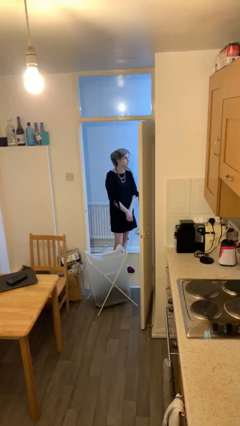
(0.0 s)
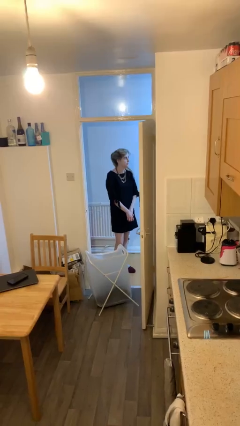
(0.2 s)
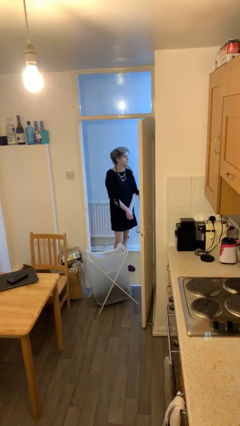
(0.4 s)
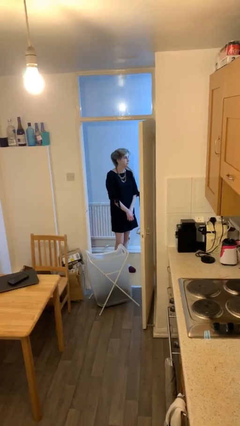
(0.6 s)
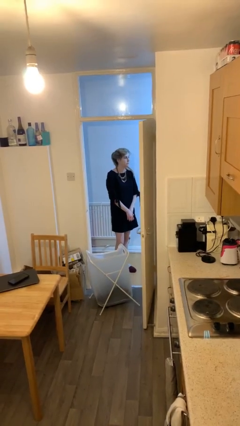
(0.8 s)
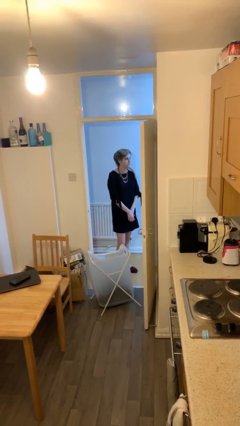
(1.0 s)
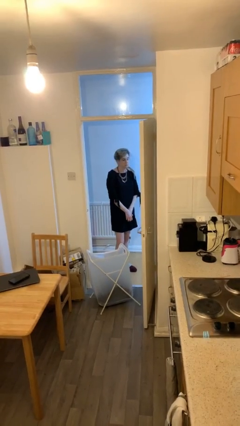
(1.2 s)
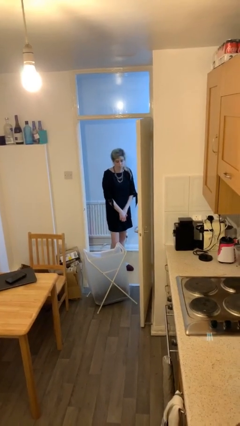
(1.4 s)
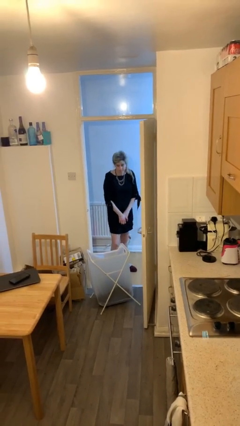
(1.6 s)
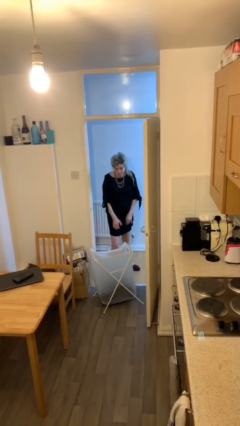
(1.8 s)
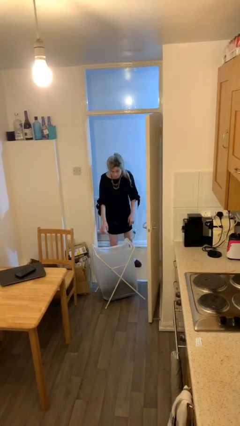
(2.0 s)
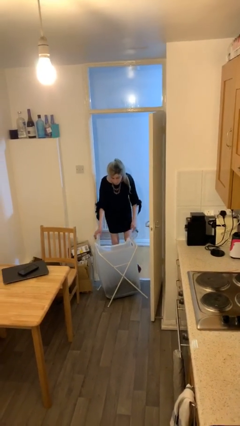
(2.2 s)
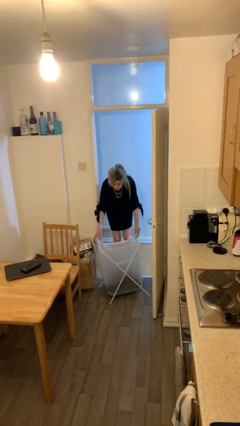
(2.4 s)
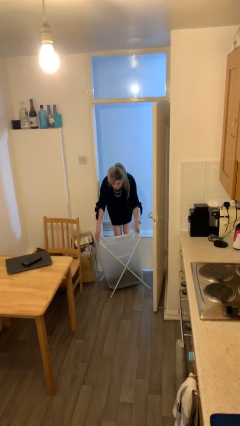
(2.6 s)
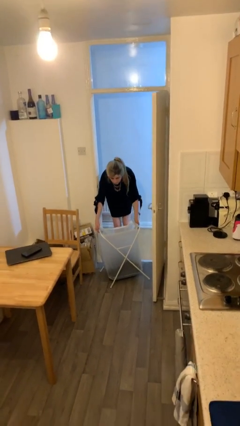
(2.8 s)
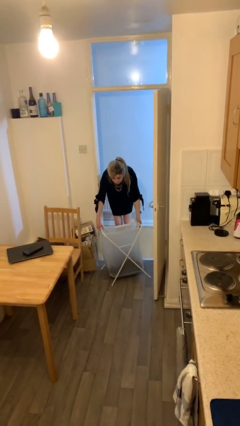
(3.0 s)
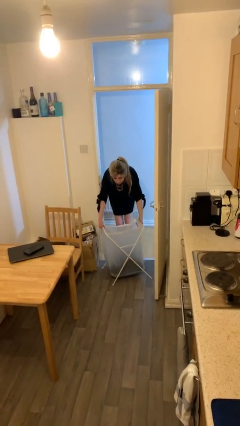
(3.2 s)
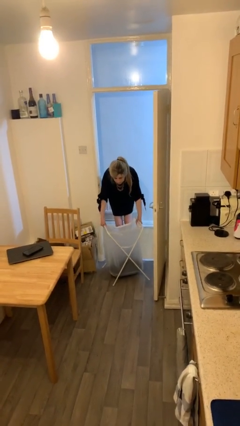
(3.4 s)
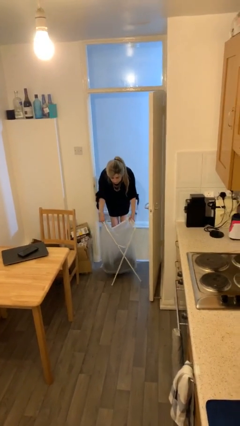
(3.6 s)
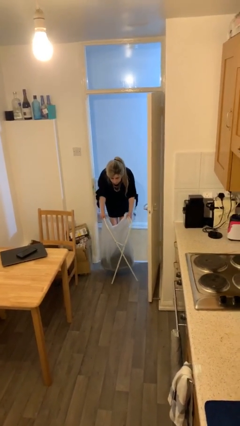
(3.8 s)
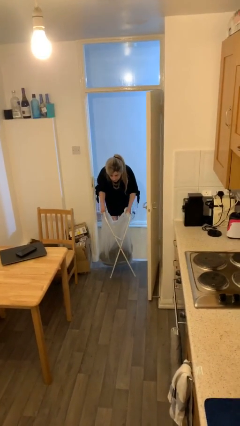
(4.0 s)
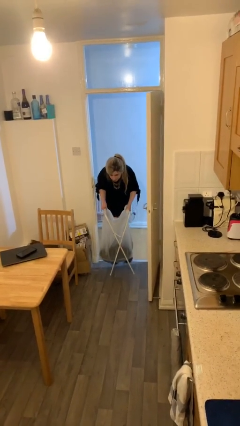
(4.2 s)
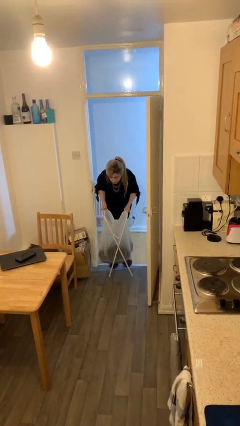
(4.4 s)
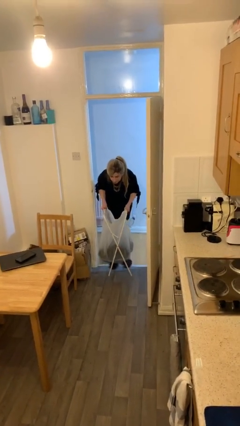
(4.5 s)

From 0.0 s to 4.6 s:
person picks up object from floor

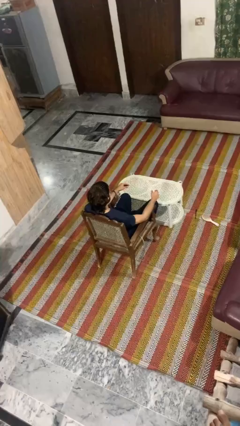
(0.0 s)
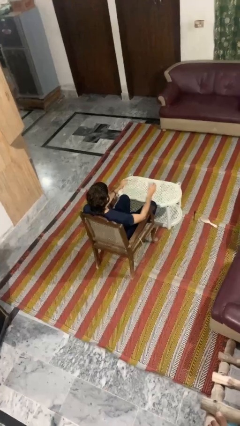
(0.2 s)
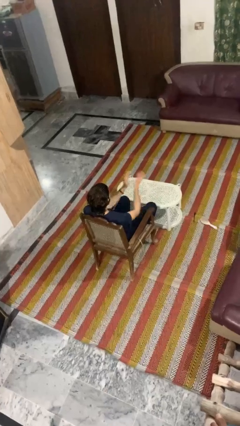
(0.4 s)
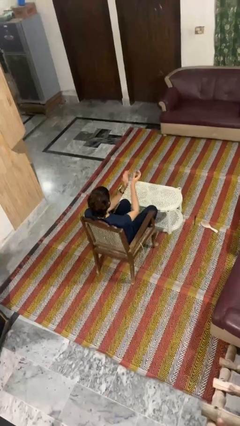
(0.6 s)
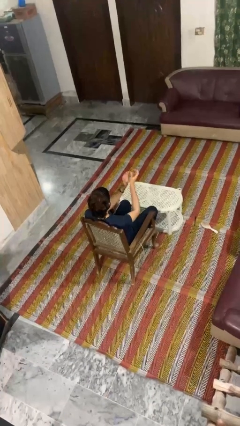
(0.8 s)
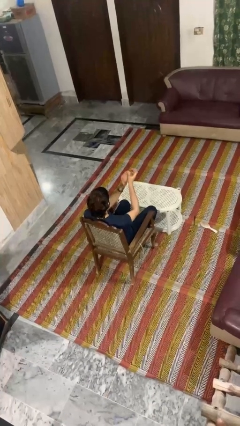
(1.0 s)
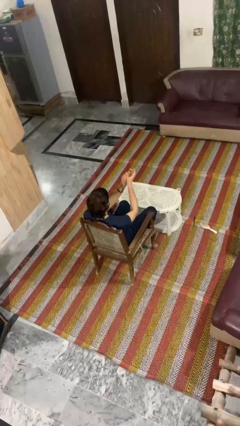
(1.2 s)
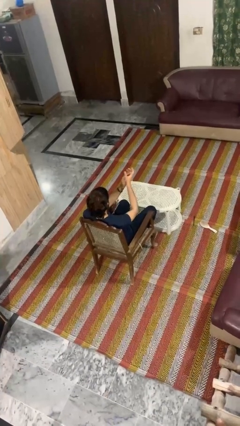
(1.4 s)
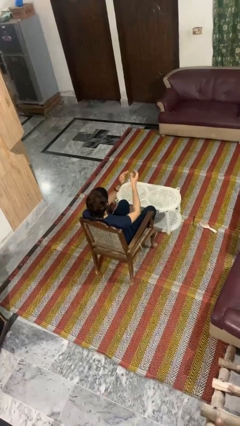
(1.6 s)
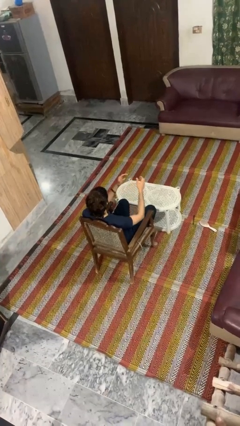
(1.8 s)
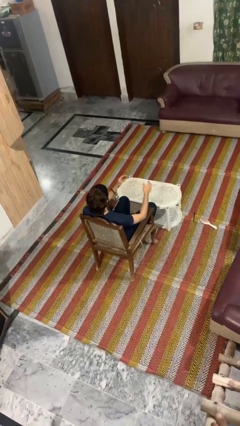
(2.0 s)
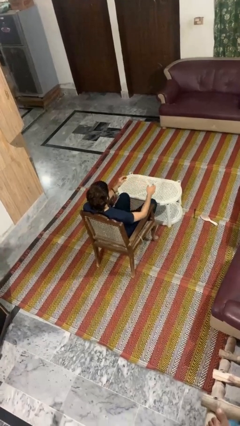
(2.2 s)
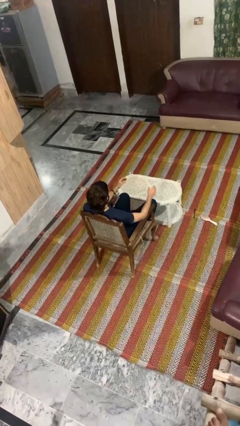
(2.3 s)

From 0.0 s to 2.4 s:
person claps hands

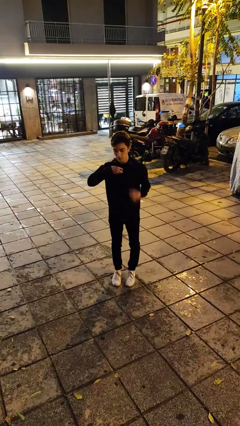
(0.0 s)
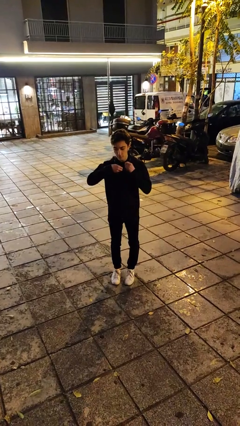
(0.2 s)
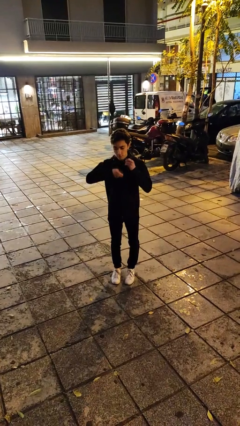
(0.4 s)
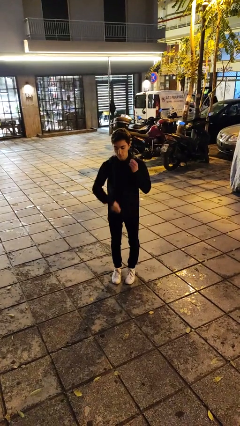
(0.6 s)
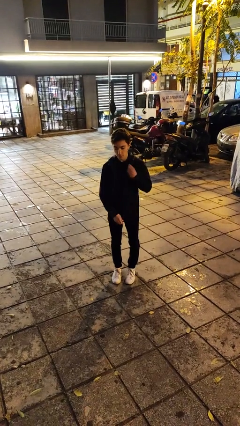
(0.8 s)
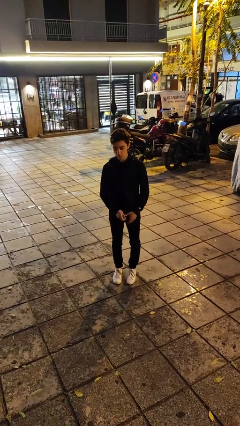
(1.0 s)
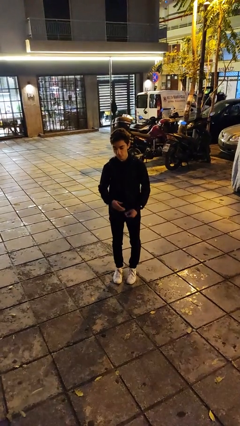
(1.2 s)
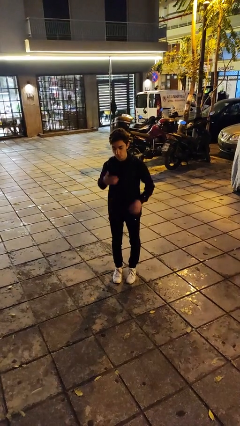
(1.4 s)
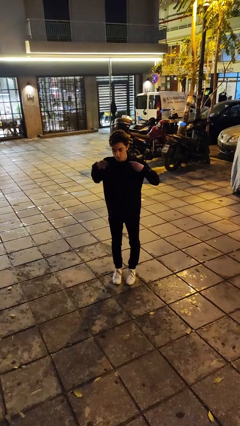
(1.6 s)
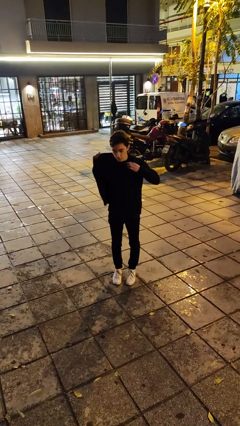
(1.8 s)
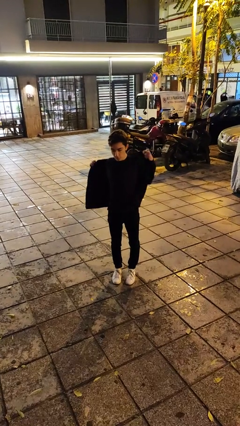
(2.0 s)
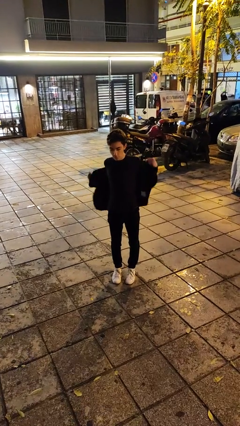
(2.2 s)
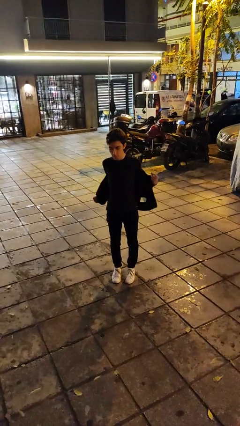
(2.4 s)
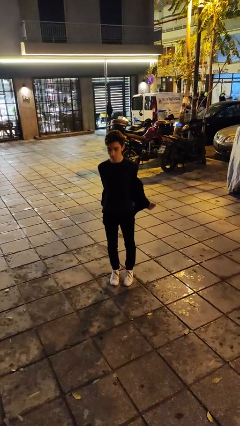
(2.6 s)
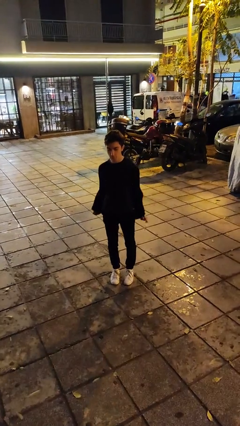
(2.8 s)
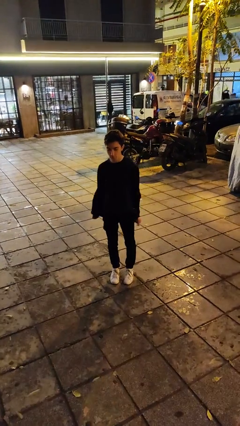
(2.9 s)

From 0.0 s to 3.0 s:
person unzips jacket

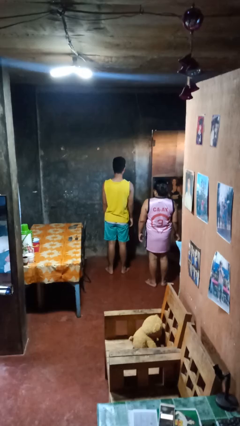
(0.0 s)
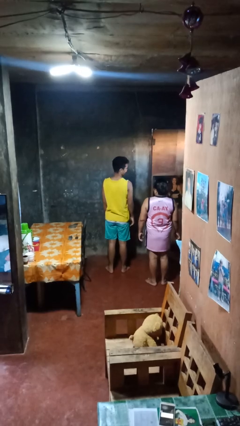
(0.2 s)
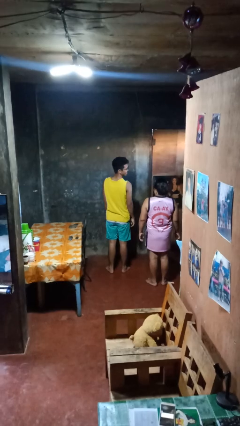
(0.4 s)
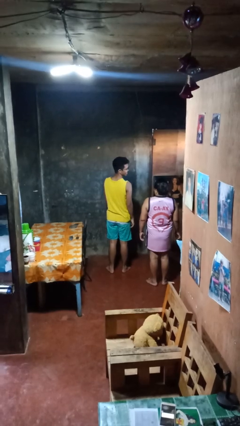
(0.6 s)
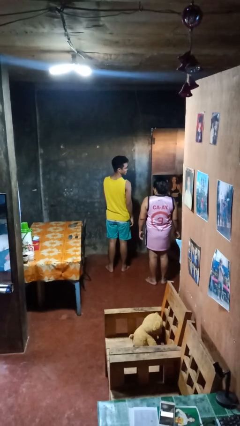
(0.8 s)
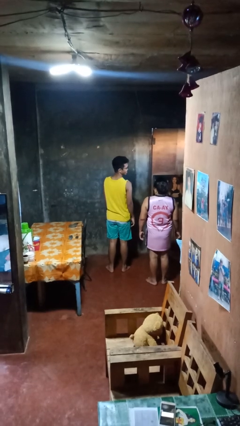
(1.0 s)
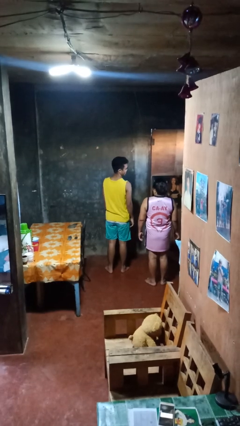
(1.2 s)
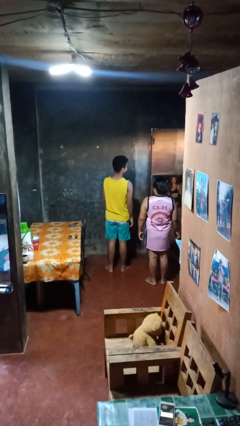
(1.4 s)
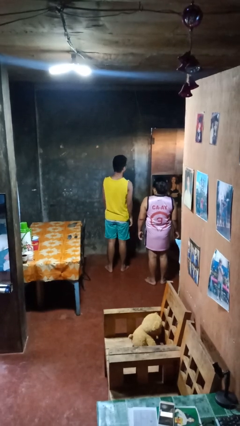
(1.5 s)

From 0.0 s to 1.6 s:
person looks over shoulder

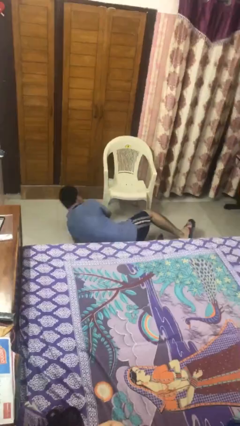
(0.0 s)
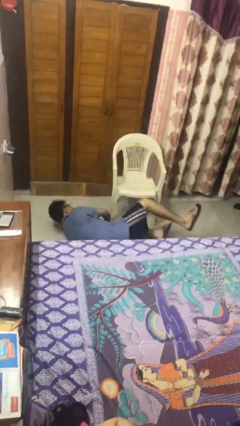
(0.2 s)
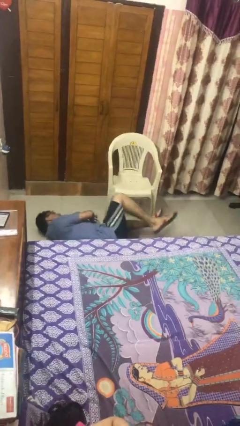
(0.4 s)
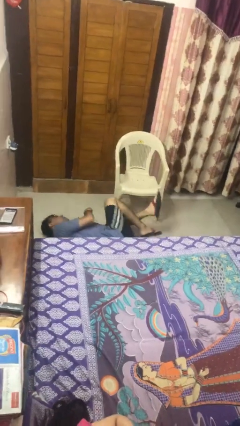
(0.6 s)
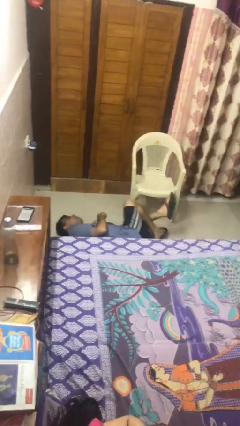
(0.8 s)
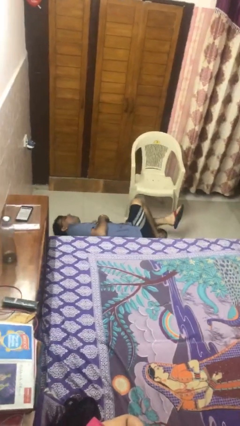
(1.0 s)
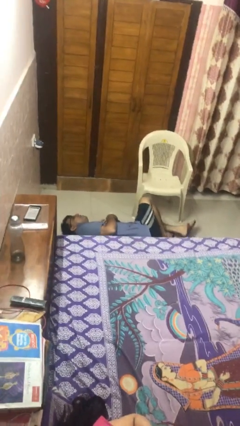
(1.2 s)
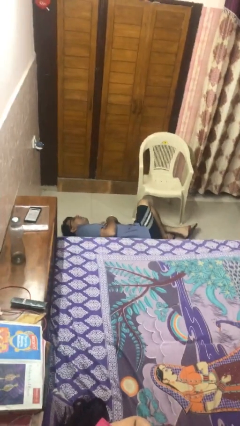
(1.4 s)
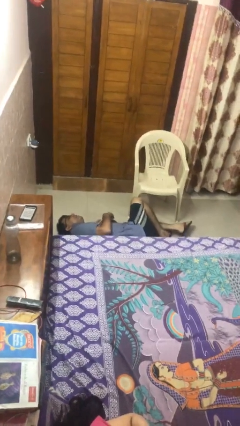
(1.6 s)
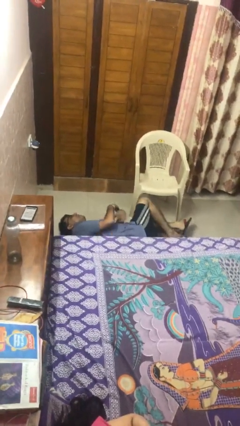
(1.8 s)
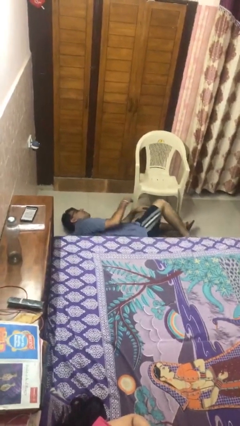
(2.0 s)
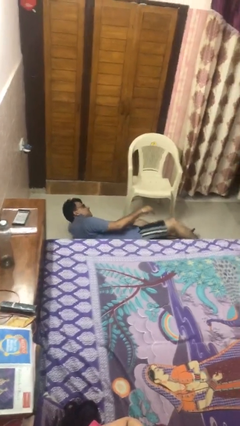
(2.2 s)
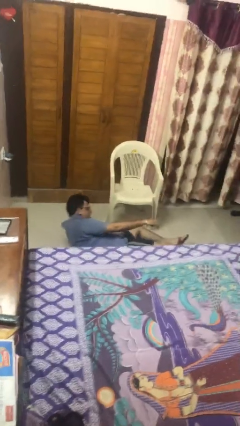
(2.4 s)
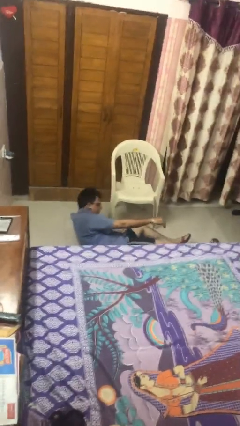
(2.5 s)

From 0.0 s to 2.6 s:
person lies down on floor

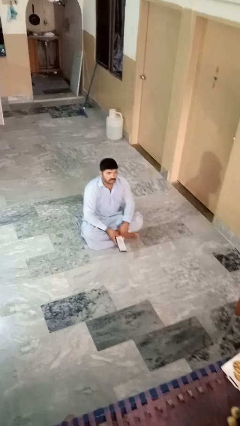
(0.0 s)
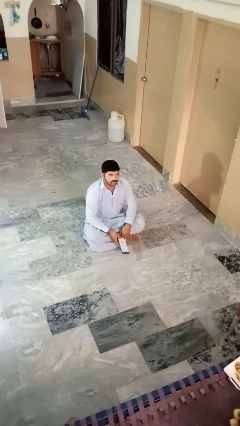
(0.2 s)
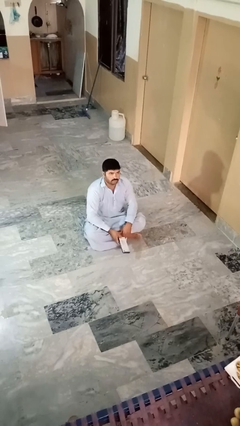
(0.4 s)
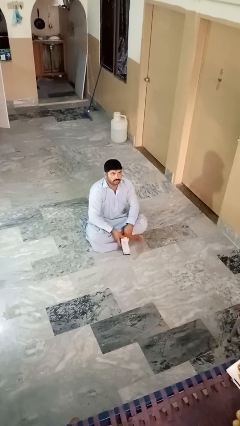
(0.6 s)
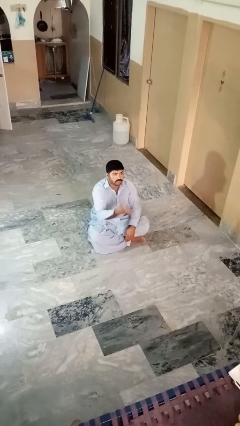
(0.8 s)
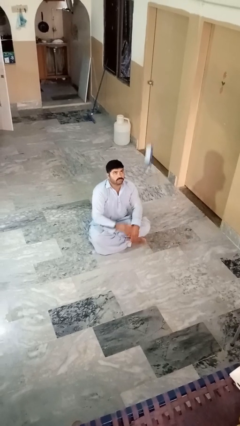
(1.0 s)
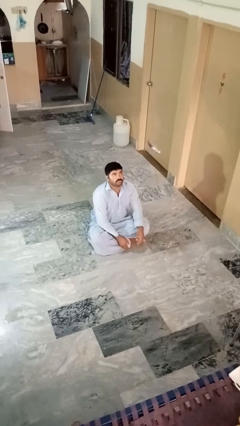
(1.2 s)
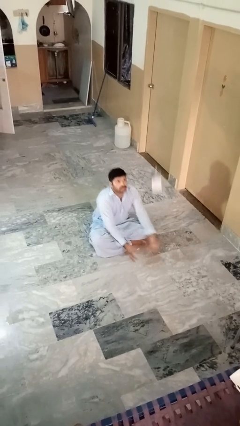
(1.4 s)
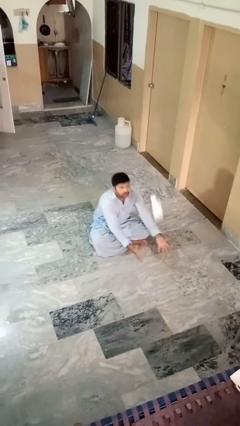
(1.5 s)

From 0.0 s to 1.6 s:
person drops object

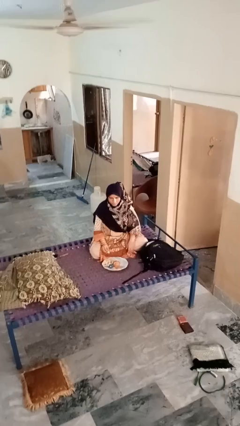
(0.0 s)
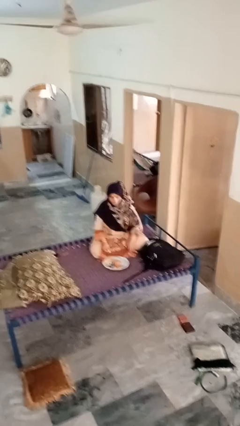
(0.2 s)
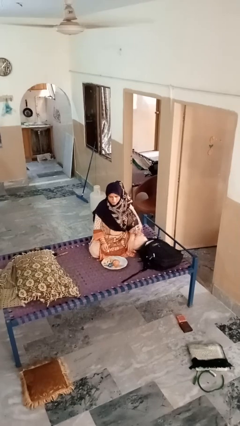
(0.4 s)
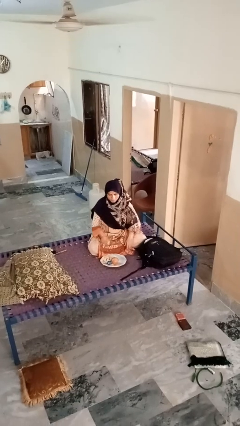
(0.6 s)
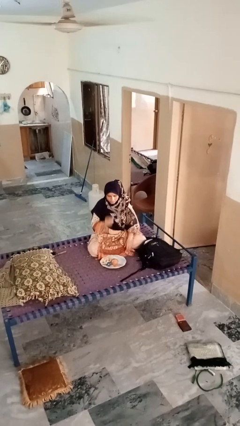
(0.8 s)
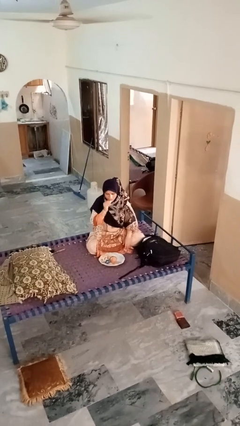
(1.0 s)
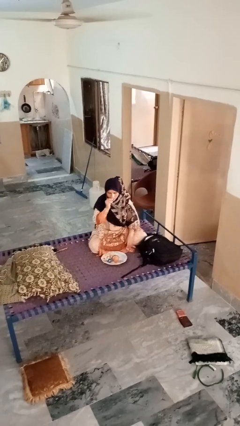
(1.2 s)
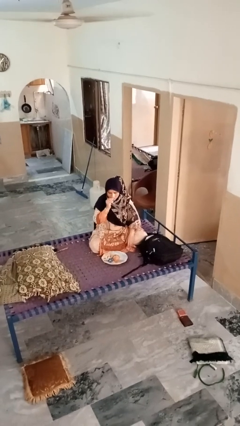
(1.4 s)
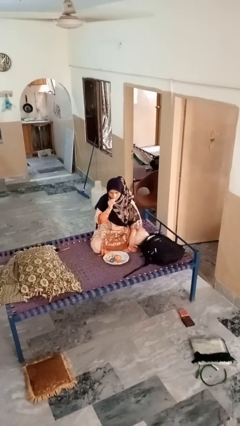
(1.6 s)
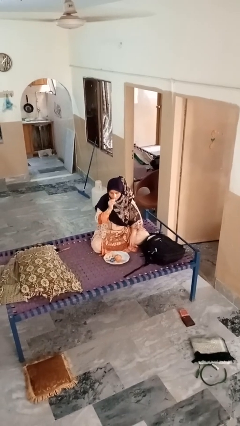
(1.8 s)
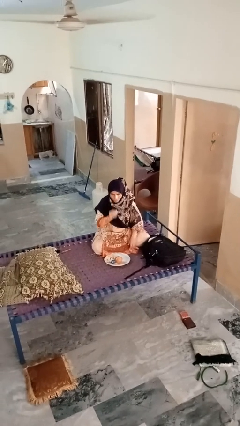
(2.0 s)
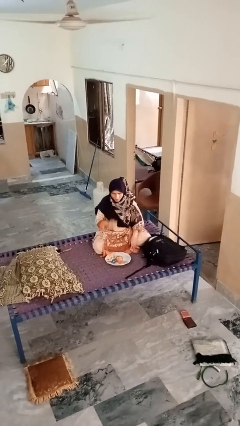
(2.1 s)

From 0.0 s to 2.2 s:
person eats apple
